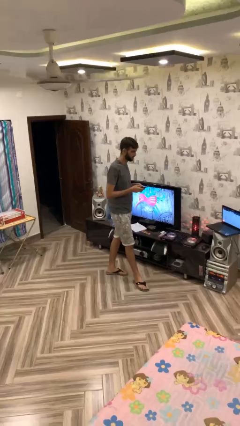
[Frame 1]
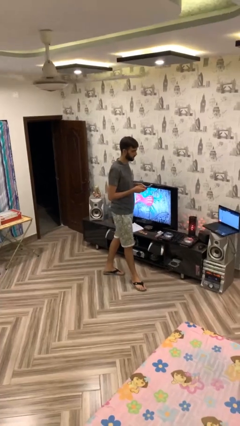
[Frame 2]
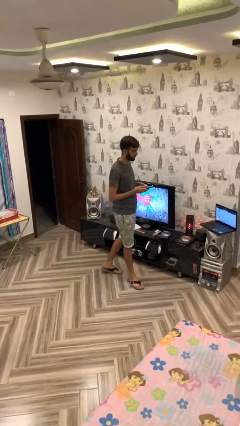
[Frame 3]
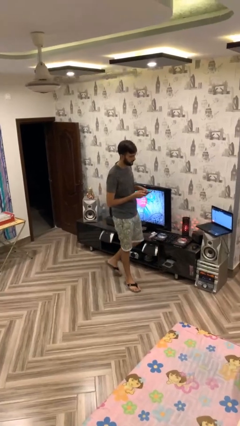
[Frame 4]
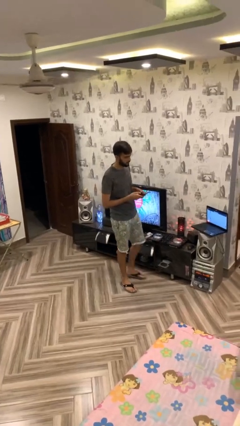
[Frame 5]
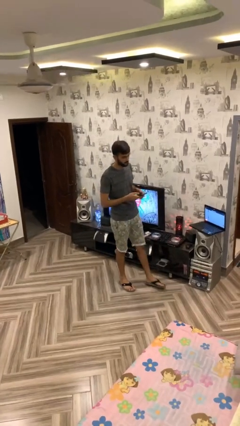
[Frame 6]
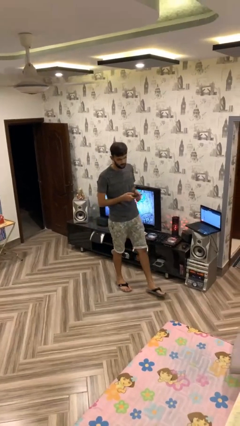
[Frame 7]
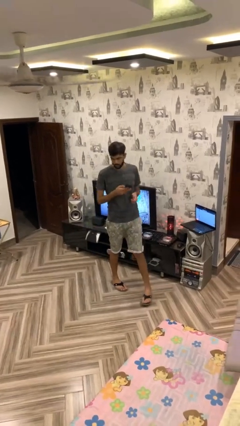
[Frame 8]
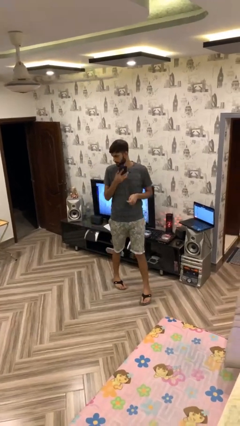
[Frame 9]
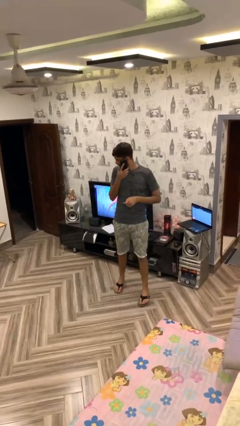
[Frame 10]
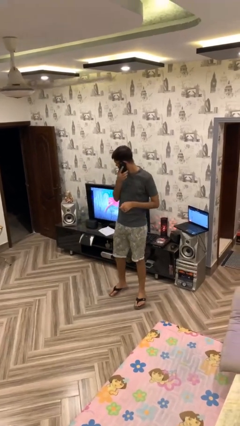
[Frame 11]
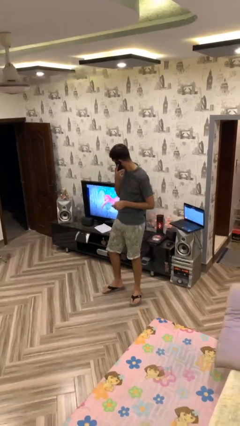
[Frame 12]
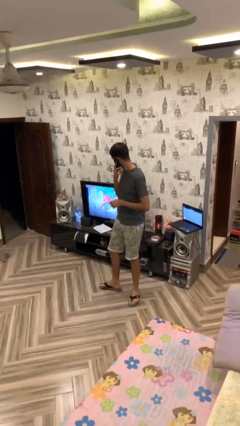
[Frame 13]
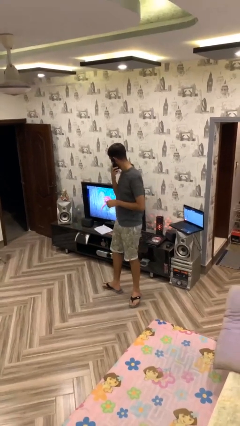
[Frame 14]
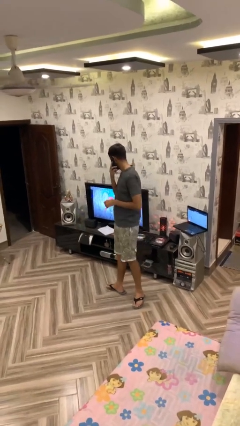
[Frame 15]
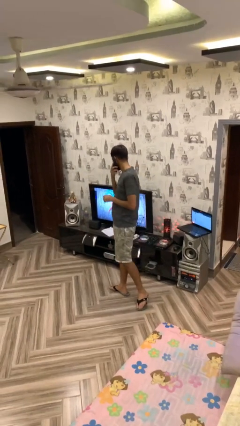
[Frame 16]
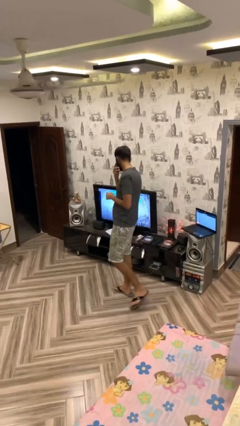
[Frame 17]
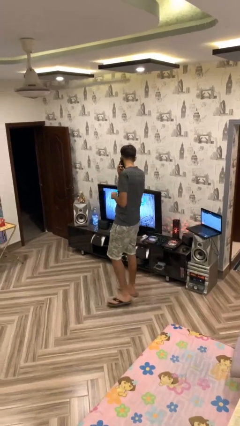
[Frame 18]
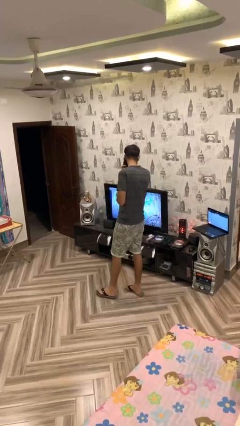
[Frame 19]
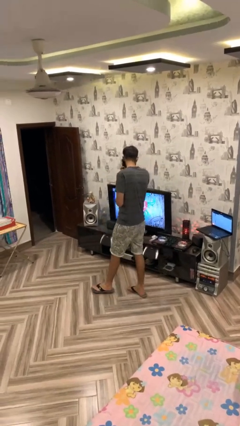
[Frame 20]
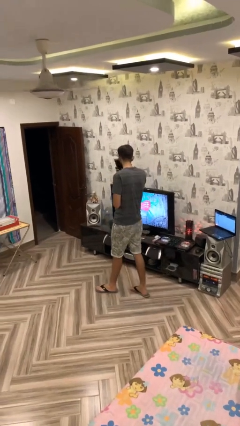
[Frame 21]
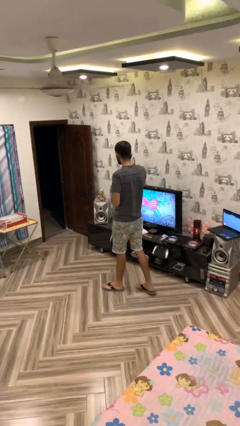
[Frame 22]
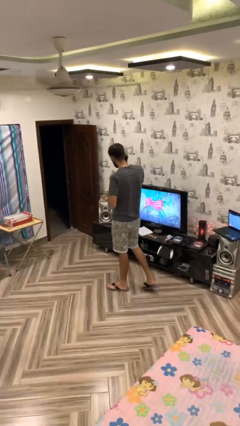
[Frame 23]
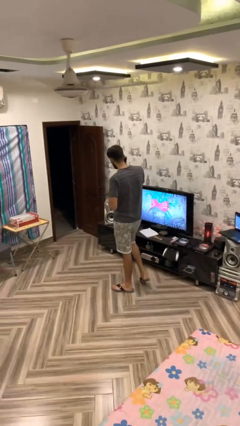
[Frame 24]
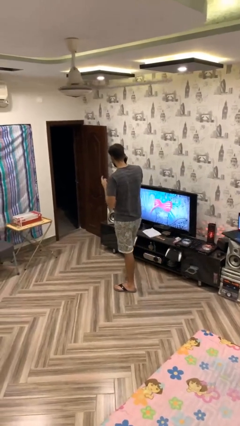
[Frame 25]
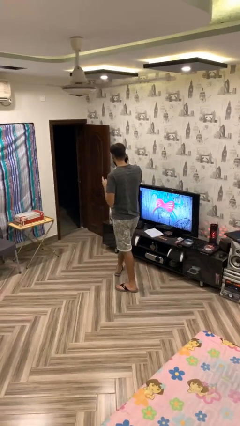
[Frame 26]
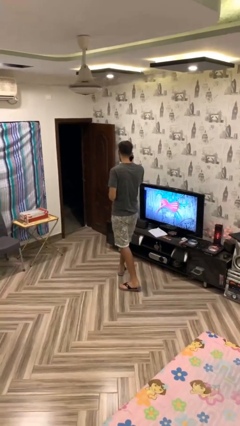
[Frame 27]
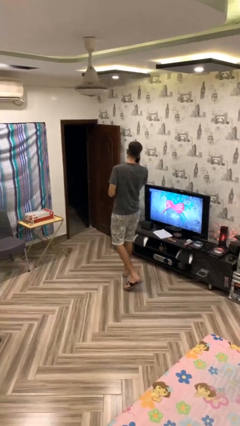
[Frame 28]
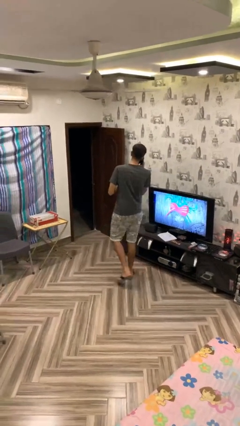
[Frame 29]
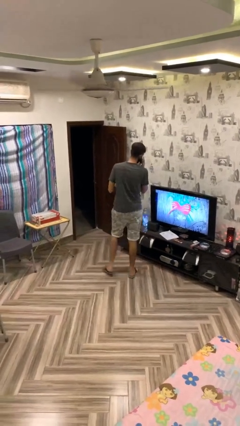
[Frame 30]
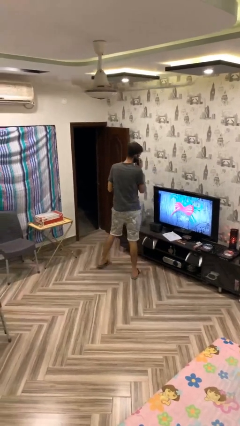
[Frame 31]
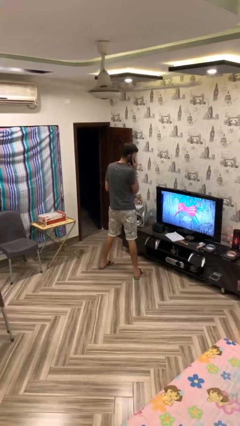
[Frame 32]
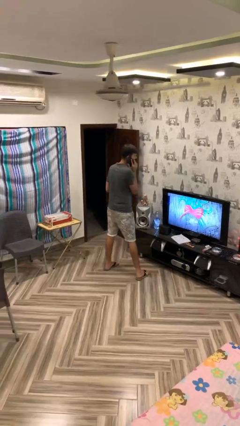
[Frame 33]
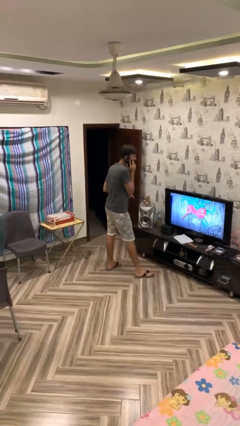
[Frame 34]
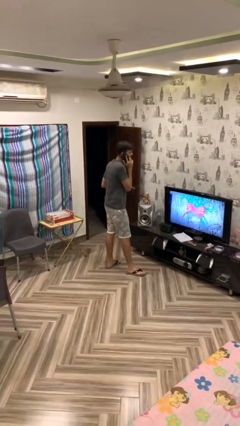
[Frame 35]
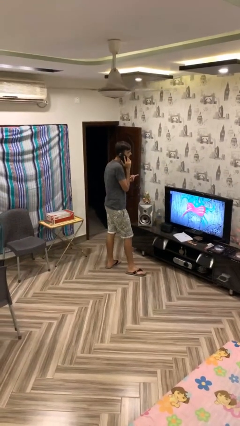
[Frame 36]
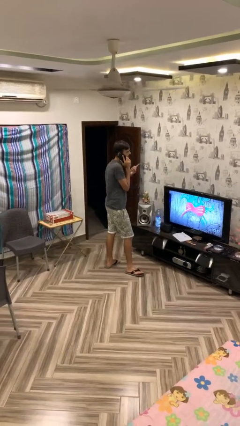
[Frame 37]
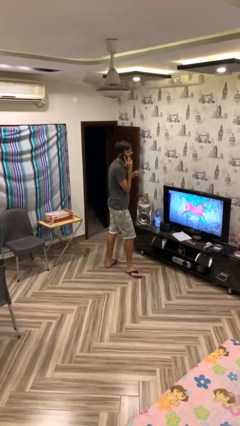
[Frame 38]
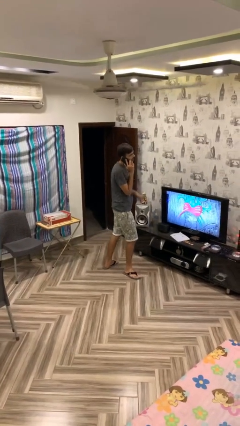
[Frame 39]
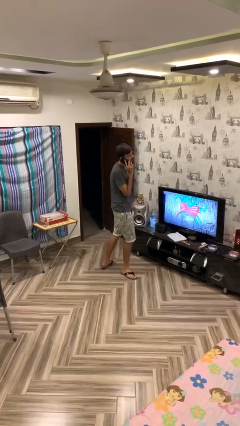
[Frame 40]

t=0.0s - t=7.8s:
person talks on phone

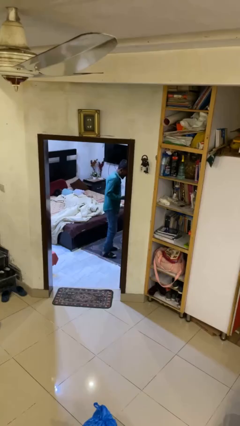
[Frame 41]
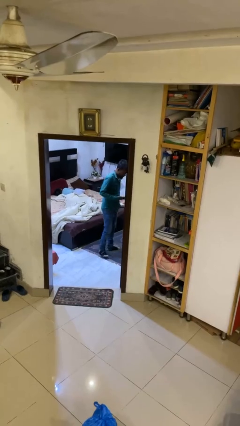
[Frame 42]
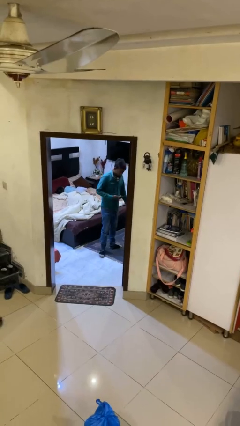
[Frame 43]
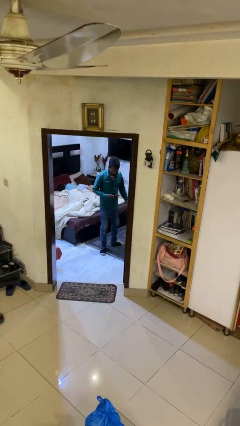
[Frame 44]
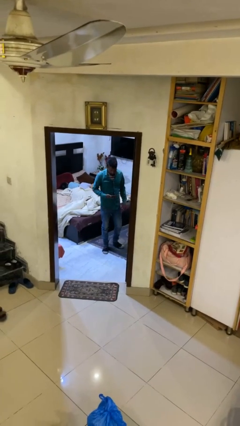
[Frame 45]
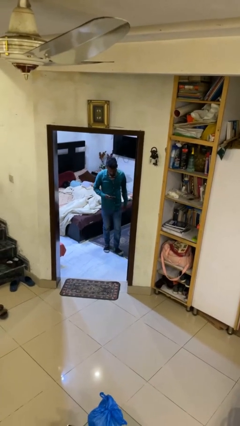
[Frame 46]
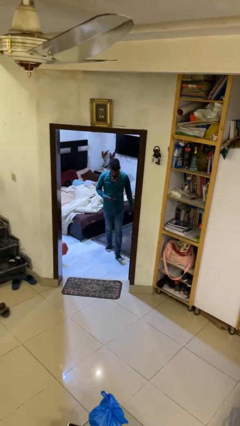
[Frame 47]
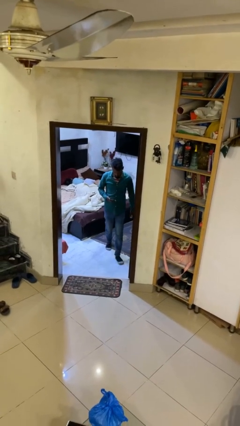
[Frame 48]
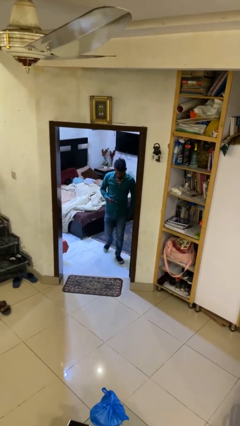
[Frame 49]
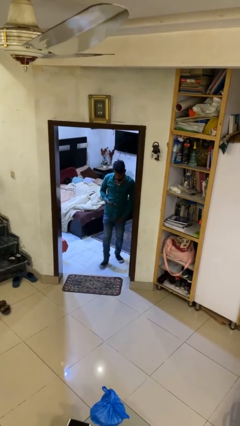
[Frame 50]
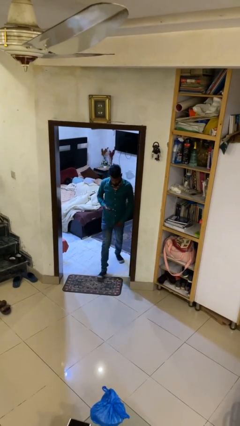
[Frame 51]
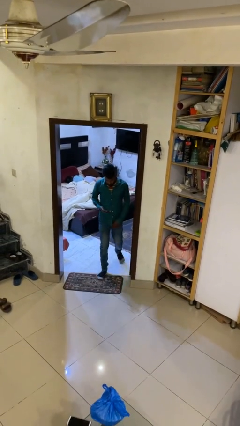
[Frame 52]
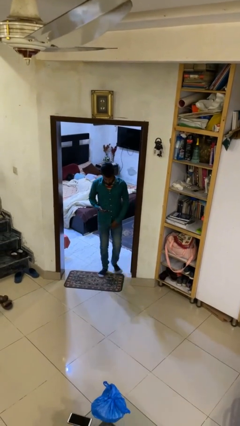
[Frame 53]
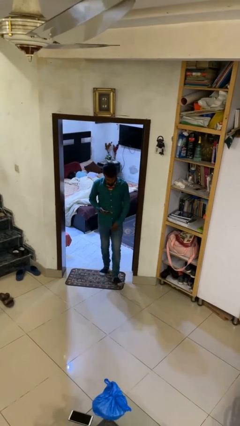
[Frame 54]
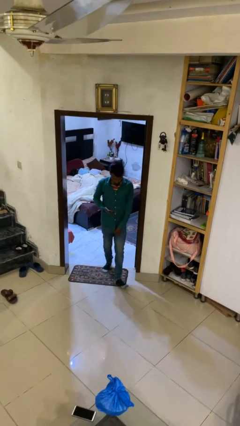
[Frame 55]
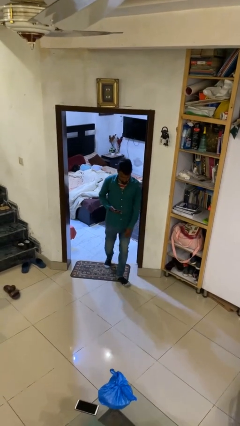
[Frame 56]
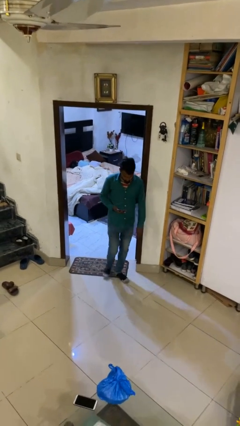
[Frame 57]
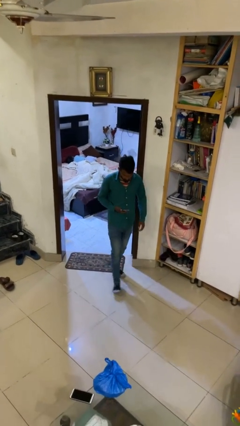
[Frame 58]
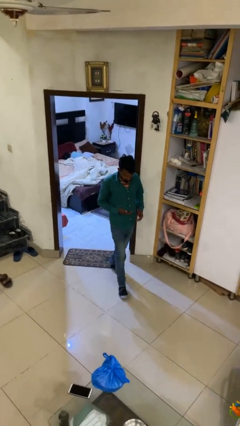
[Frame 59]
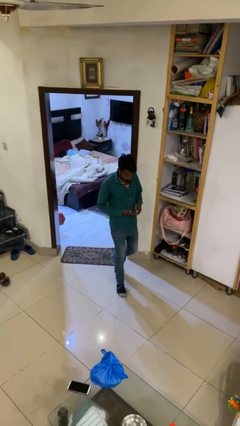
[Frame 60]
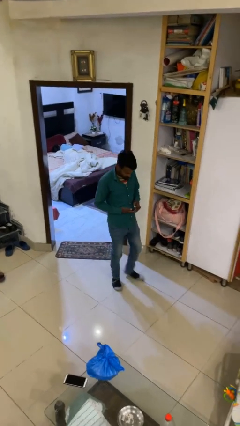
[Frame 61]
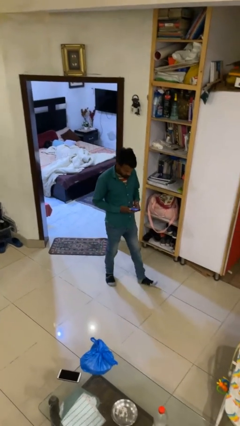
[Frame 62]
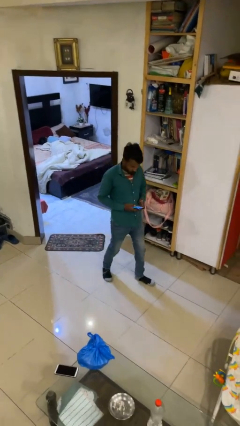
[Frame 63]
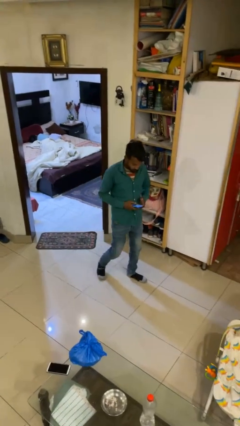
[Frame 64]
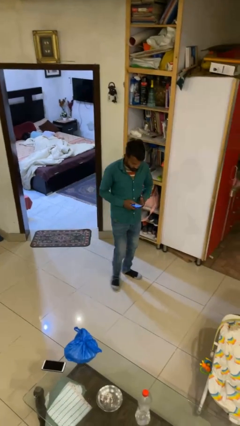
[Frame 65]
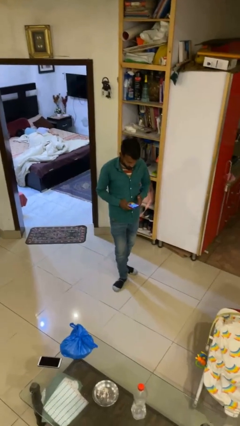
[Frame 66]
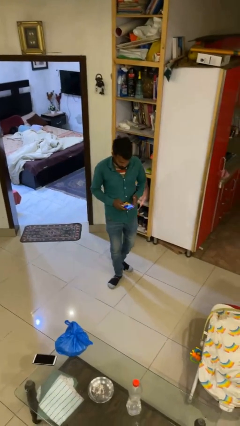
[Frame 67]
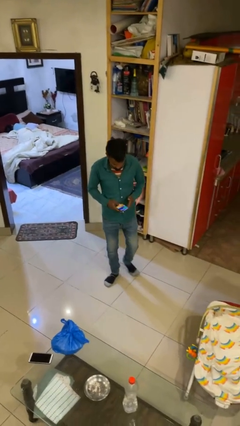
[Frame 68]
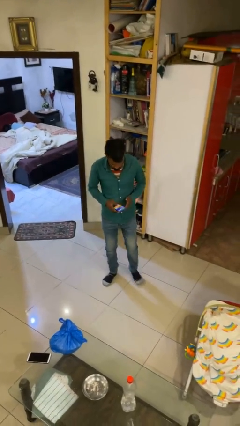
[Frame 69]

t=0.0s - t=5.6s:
person enters scene through structure

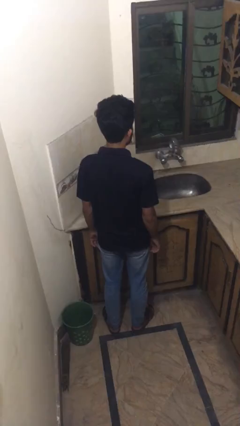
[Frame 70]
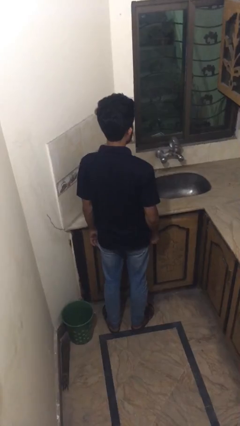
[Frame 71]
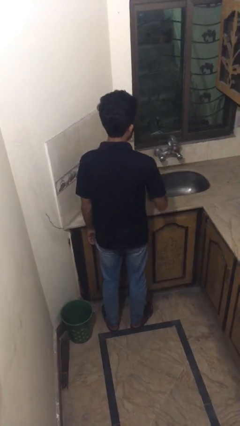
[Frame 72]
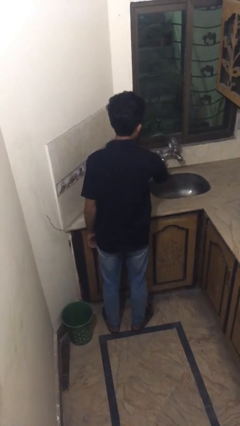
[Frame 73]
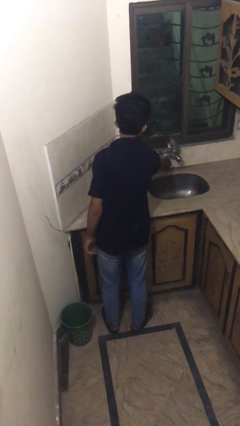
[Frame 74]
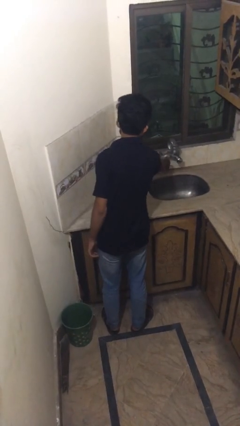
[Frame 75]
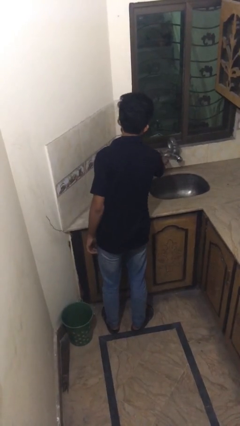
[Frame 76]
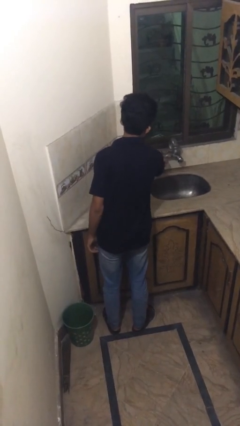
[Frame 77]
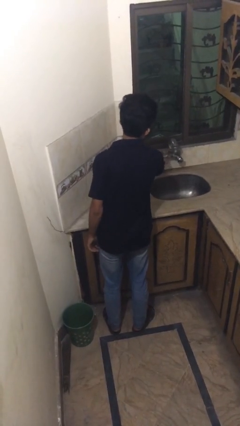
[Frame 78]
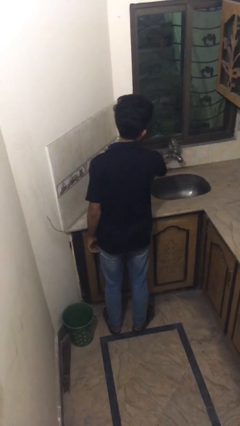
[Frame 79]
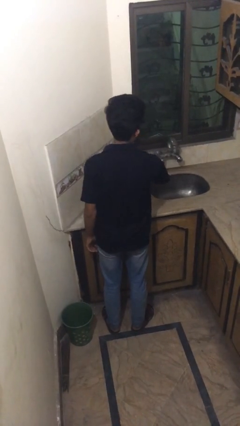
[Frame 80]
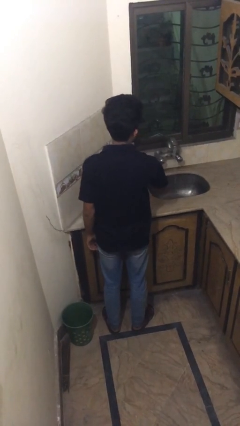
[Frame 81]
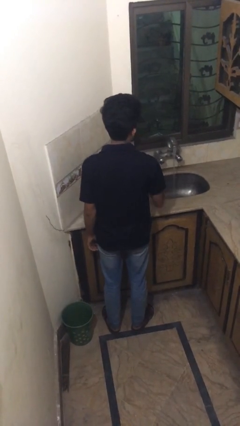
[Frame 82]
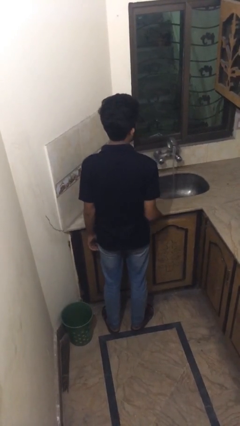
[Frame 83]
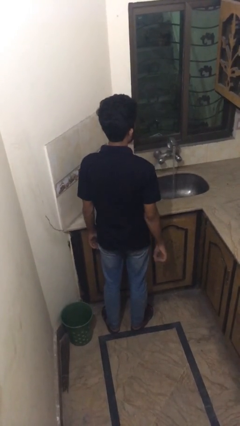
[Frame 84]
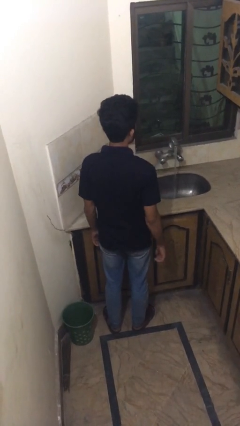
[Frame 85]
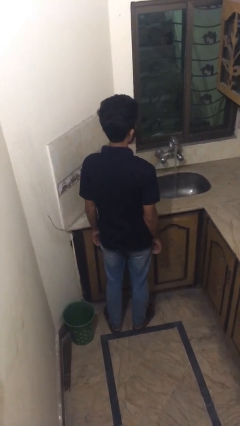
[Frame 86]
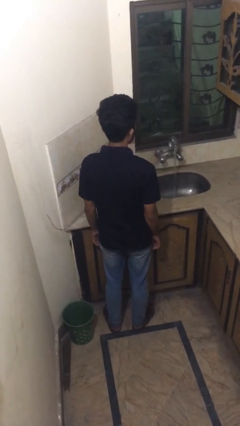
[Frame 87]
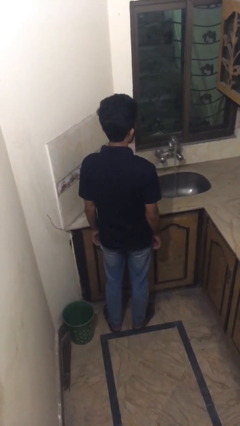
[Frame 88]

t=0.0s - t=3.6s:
person turns on faucet

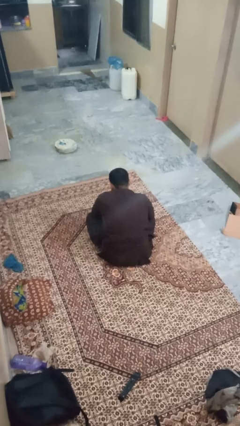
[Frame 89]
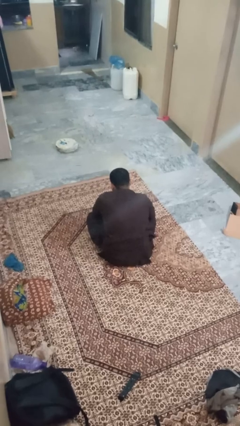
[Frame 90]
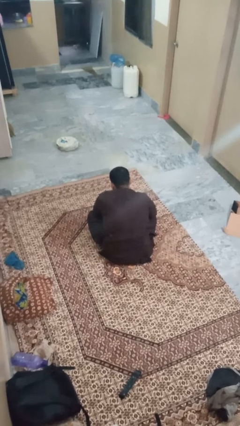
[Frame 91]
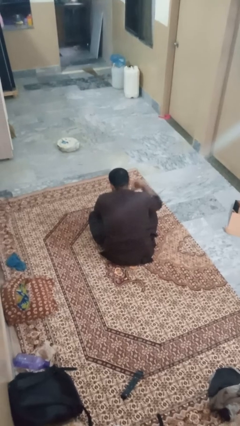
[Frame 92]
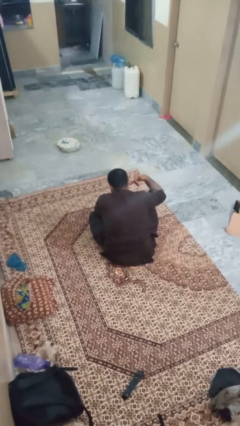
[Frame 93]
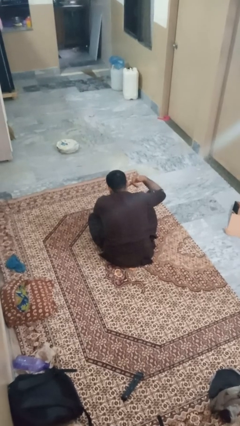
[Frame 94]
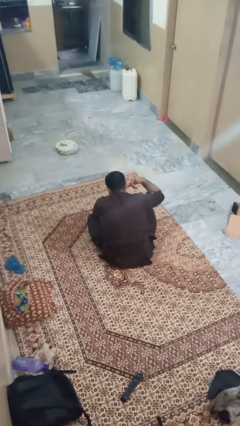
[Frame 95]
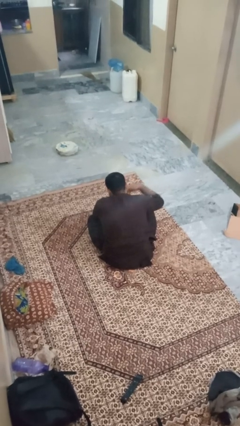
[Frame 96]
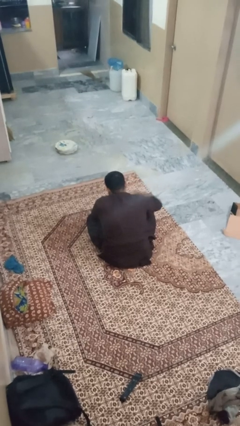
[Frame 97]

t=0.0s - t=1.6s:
person gestures call me
